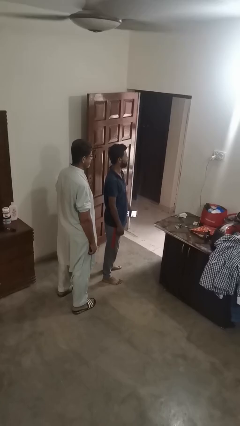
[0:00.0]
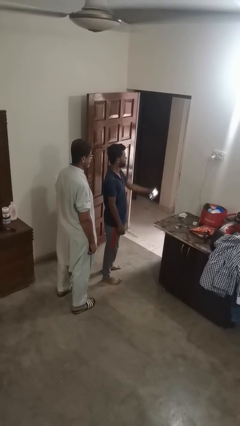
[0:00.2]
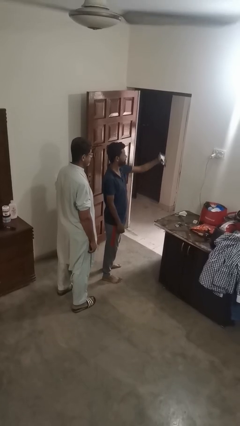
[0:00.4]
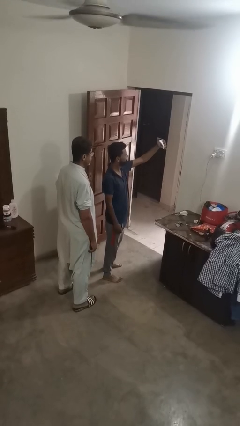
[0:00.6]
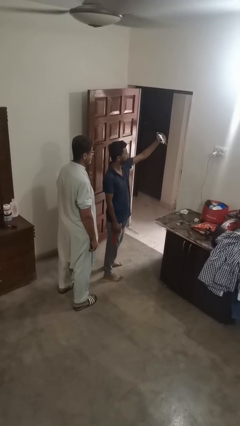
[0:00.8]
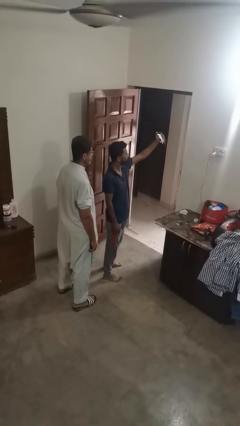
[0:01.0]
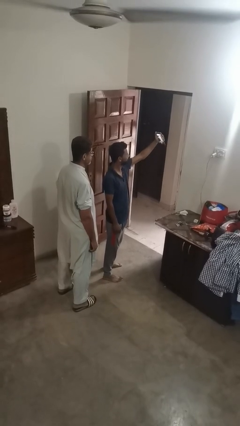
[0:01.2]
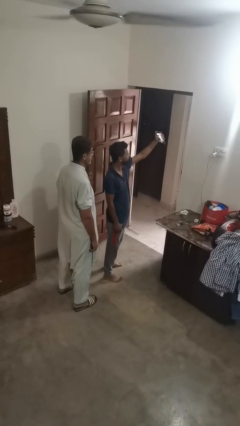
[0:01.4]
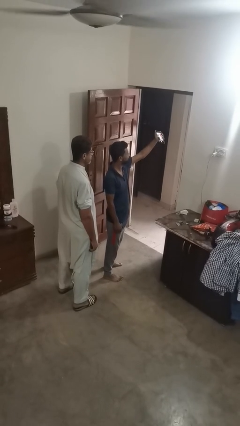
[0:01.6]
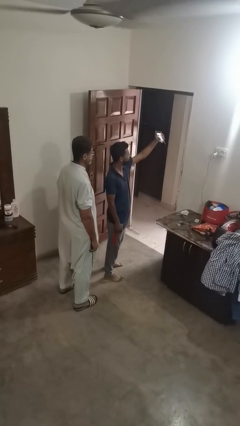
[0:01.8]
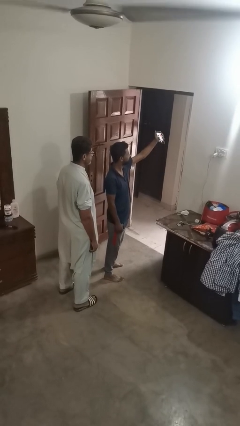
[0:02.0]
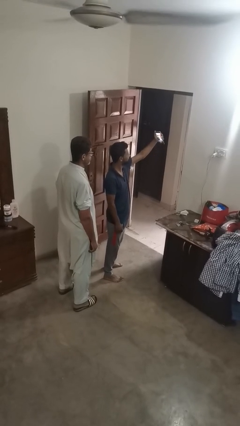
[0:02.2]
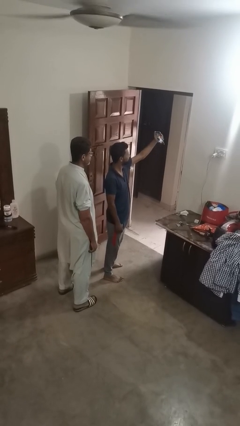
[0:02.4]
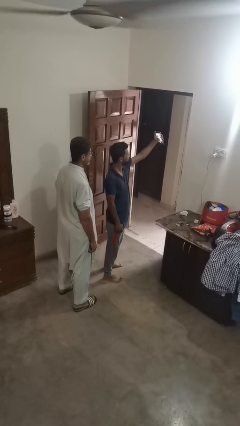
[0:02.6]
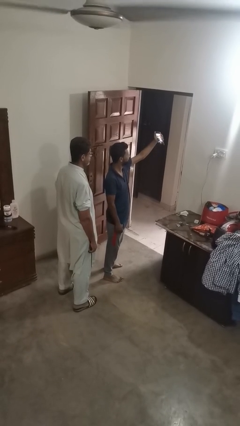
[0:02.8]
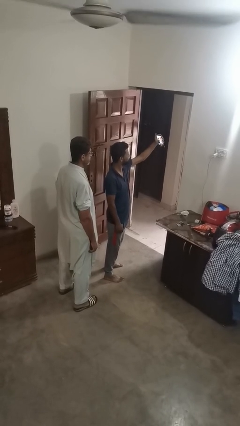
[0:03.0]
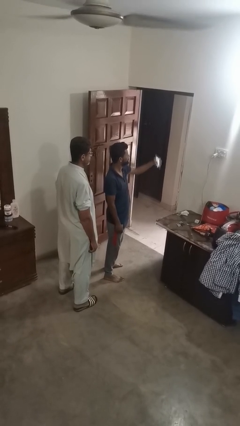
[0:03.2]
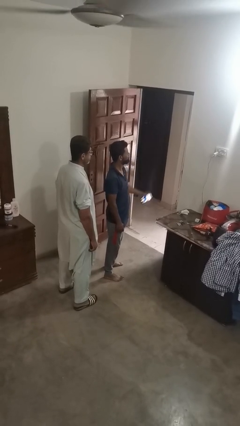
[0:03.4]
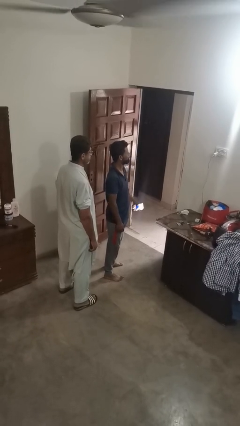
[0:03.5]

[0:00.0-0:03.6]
person takes selfie with person

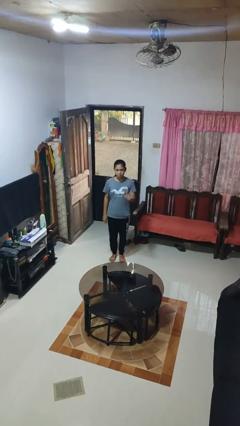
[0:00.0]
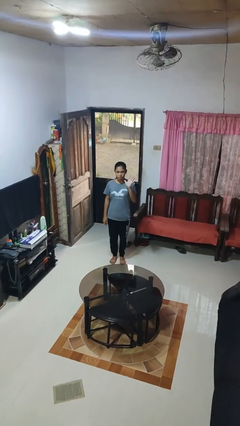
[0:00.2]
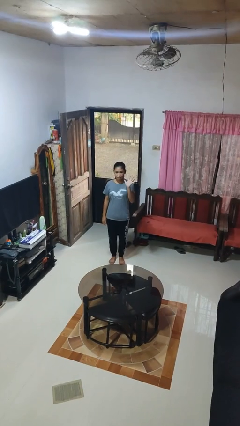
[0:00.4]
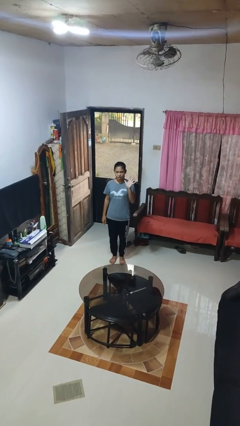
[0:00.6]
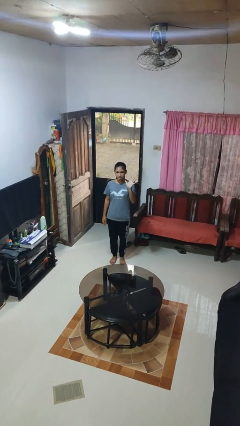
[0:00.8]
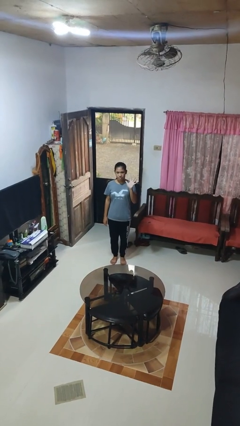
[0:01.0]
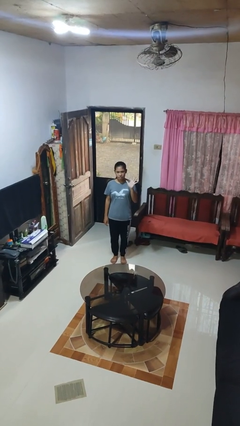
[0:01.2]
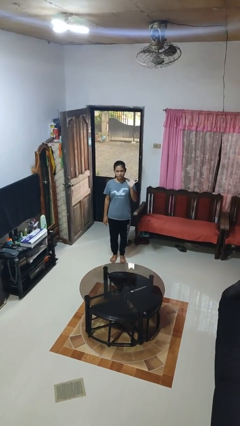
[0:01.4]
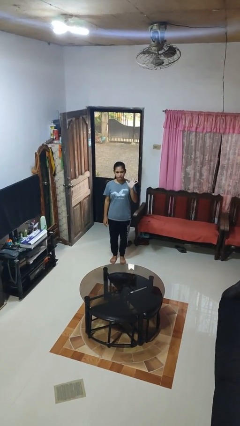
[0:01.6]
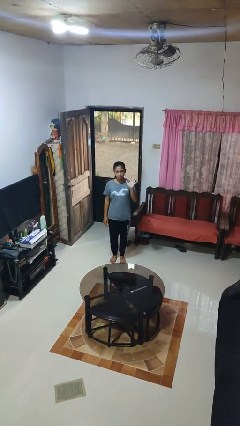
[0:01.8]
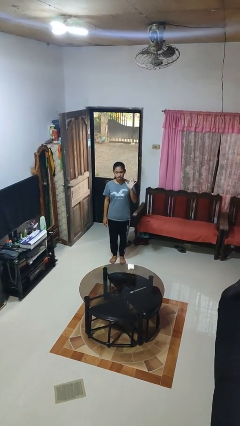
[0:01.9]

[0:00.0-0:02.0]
person gestures number five

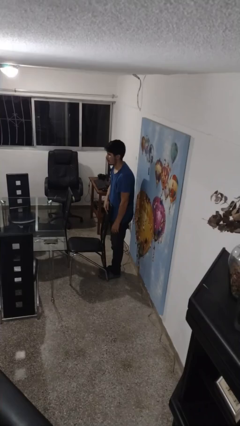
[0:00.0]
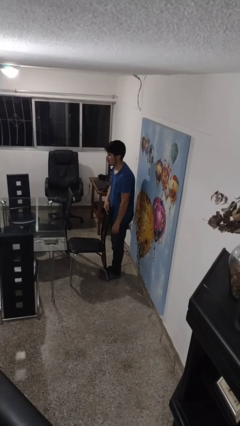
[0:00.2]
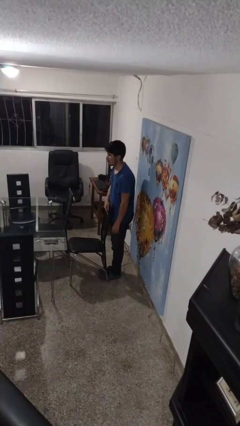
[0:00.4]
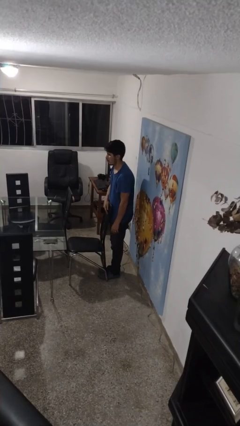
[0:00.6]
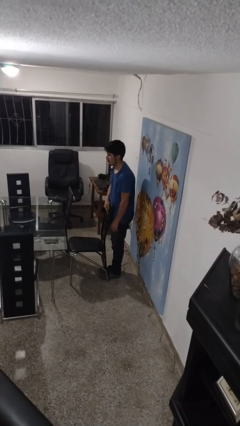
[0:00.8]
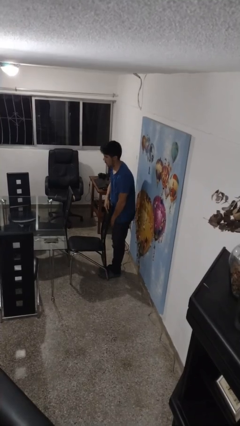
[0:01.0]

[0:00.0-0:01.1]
person pushes in chair

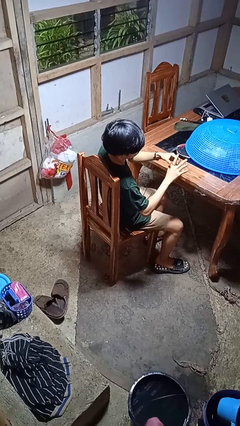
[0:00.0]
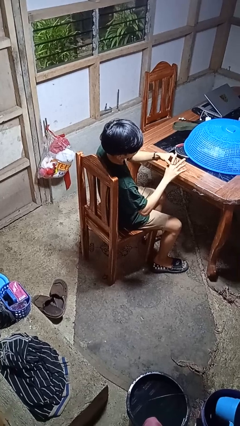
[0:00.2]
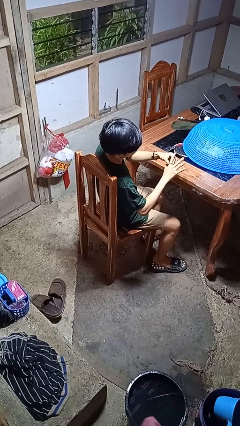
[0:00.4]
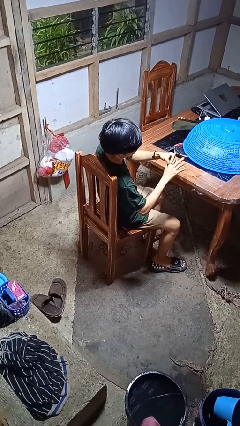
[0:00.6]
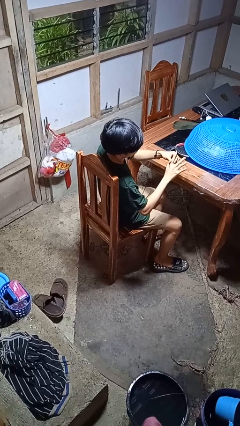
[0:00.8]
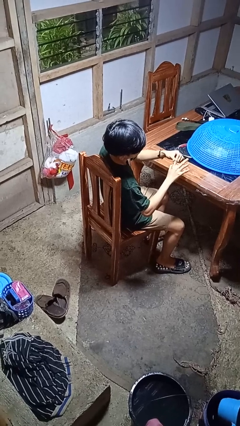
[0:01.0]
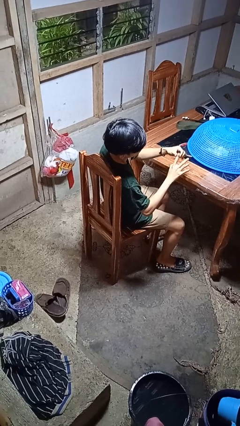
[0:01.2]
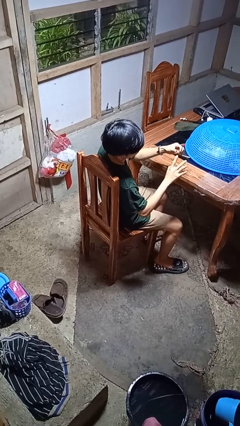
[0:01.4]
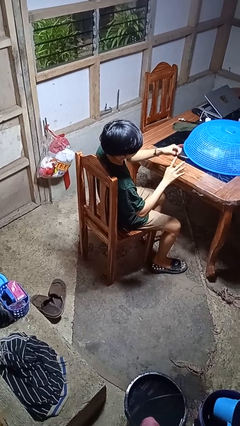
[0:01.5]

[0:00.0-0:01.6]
person takes off ring

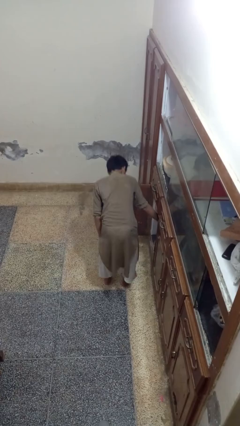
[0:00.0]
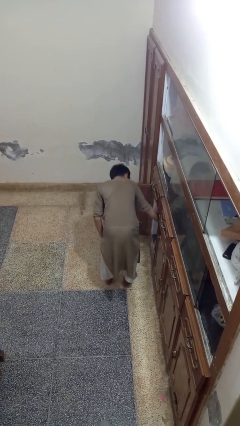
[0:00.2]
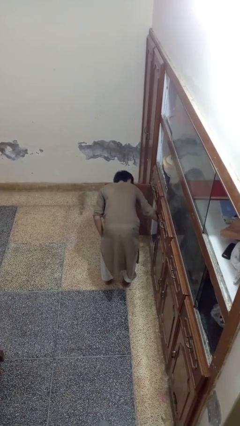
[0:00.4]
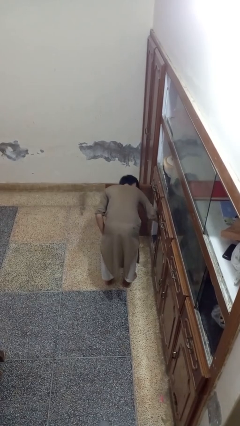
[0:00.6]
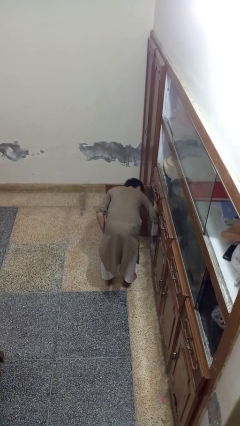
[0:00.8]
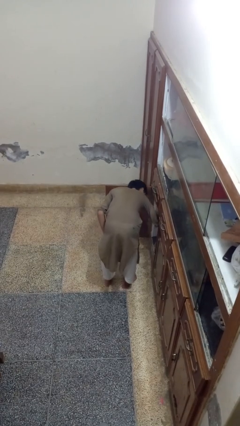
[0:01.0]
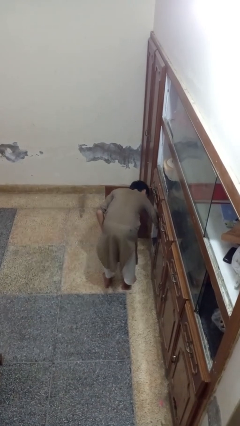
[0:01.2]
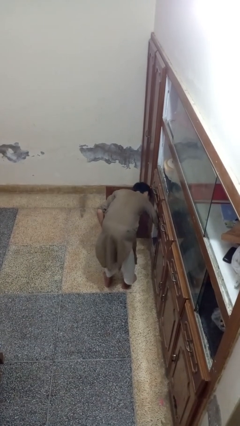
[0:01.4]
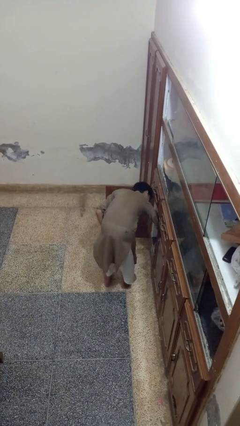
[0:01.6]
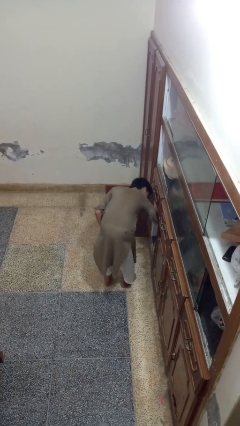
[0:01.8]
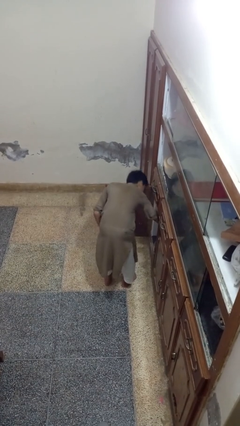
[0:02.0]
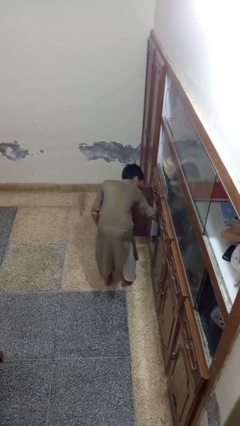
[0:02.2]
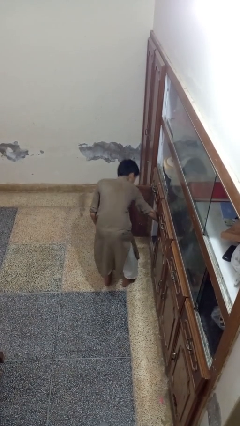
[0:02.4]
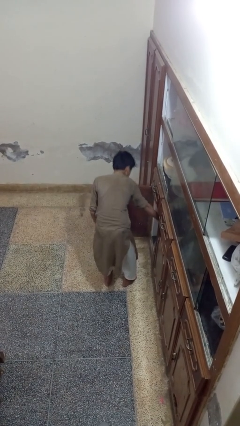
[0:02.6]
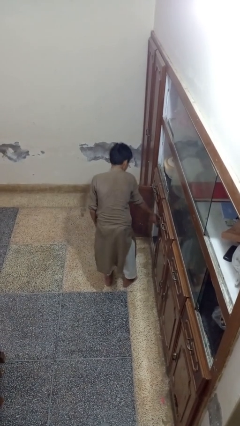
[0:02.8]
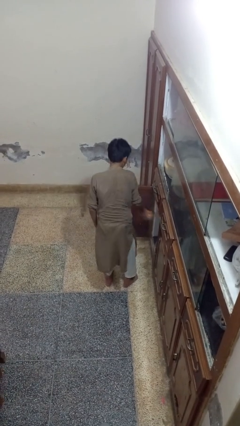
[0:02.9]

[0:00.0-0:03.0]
person takes object from cabinet

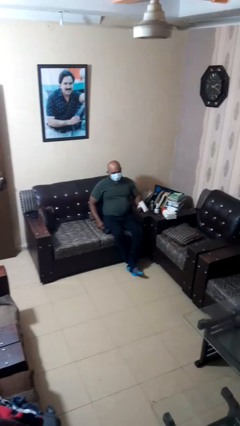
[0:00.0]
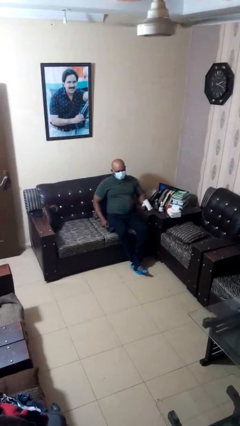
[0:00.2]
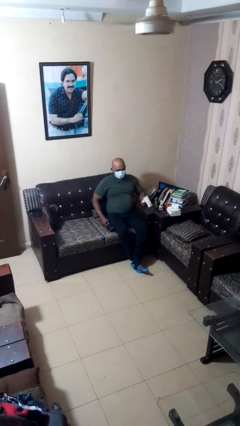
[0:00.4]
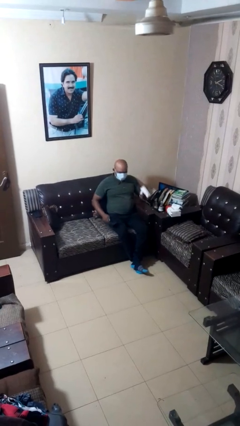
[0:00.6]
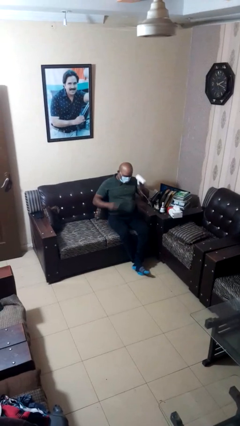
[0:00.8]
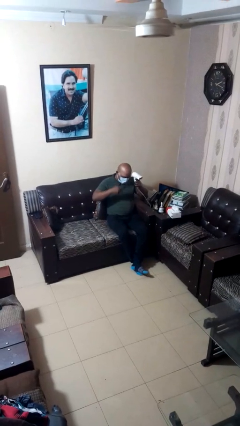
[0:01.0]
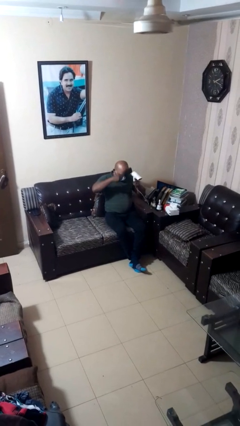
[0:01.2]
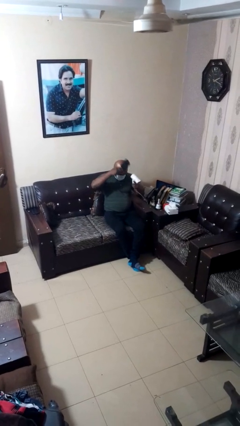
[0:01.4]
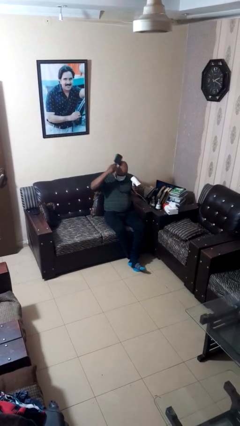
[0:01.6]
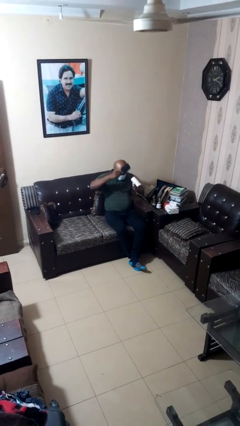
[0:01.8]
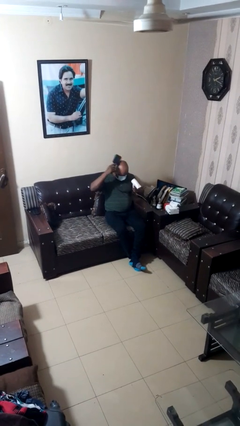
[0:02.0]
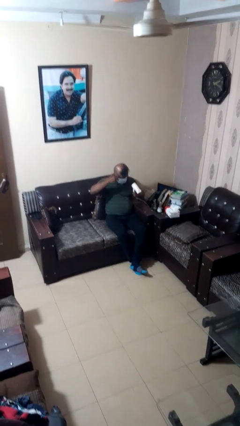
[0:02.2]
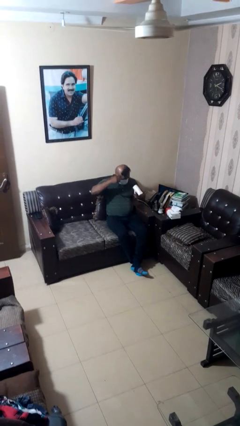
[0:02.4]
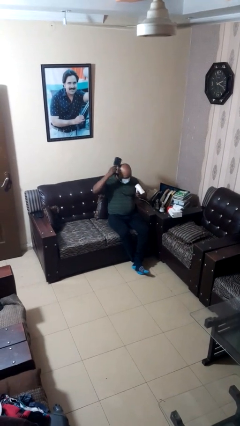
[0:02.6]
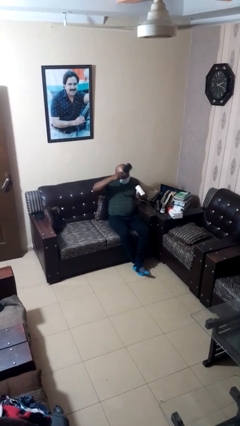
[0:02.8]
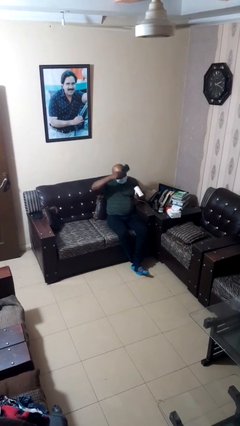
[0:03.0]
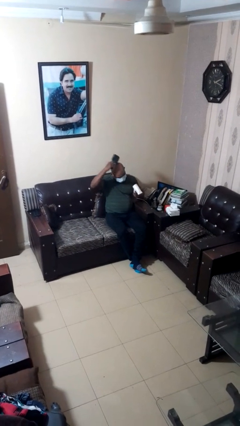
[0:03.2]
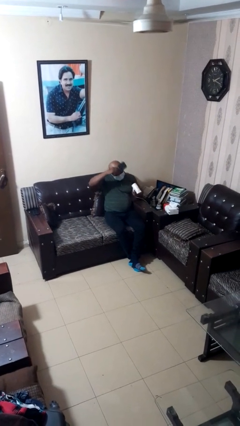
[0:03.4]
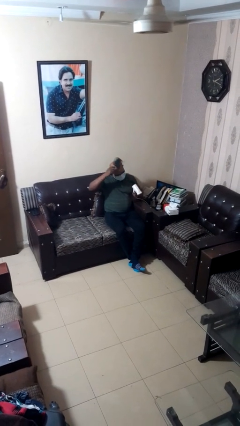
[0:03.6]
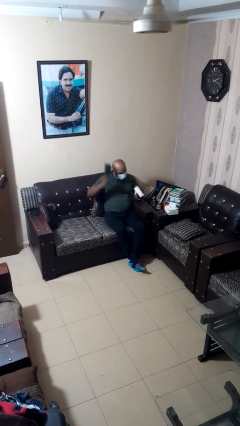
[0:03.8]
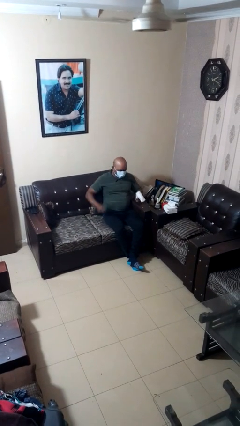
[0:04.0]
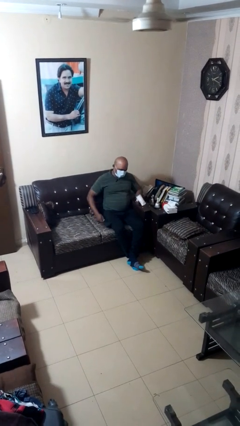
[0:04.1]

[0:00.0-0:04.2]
person dries hair with hairdryer

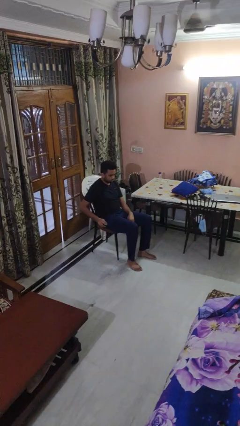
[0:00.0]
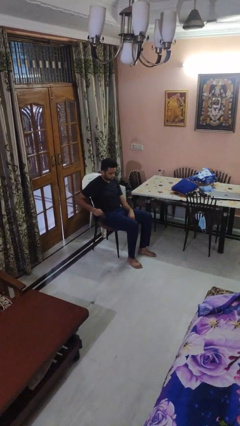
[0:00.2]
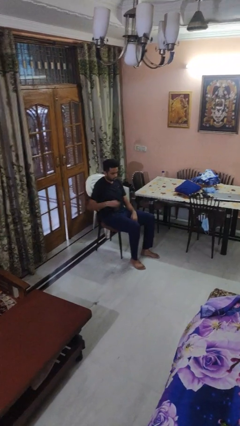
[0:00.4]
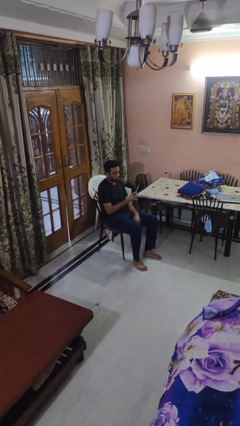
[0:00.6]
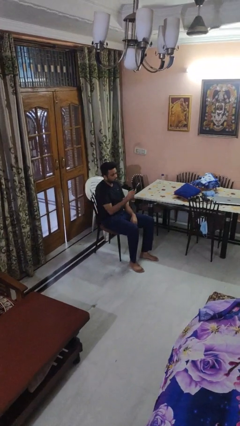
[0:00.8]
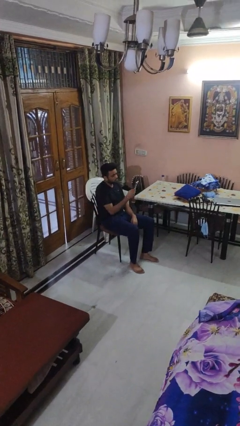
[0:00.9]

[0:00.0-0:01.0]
person takes phone from pocket

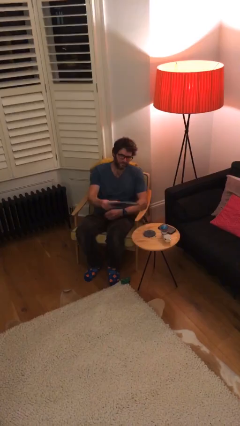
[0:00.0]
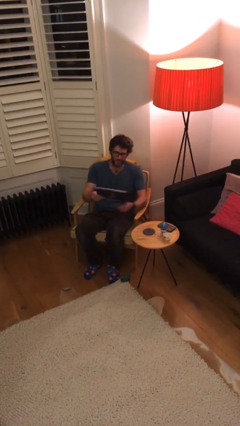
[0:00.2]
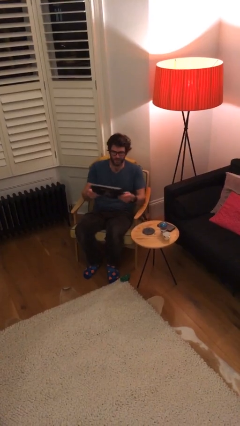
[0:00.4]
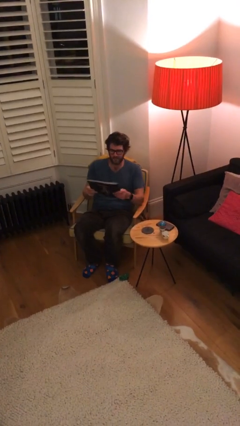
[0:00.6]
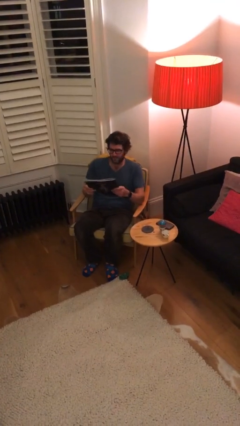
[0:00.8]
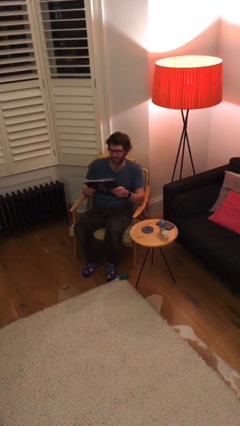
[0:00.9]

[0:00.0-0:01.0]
person picks up object from table
